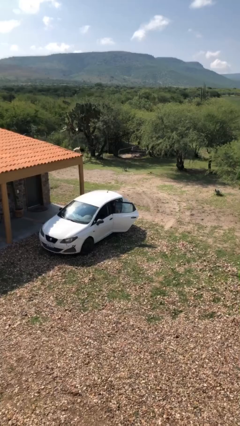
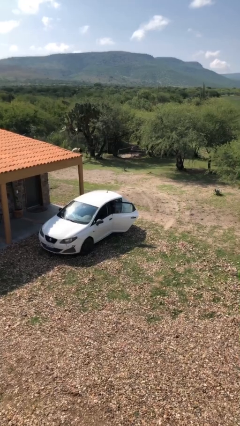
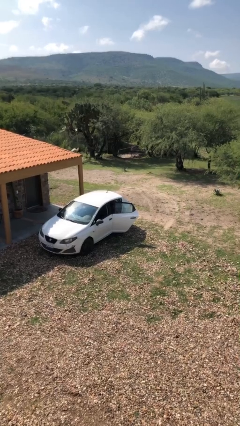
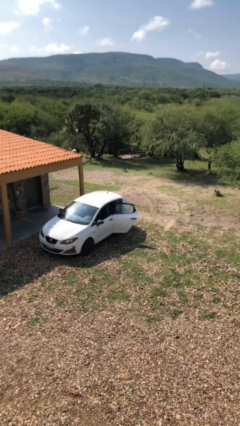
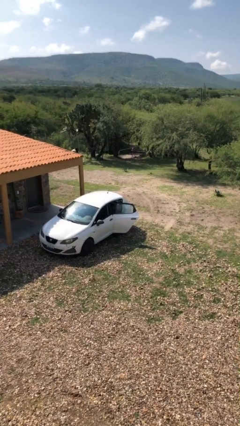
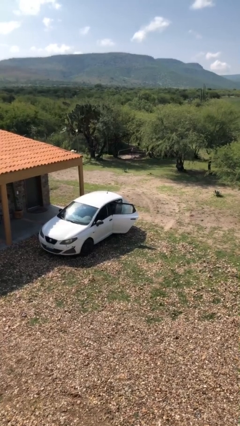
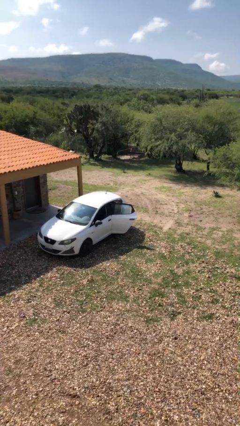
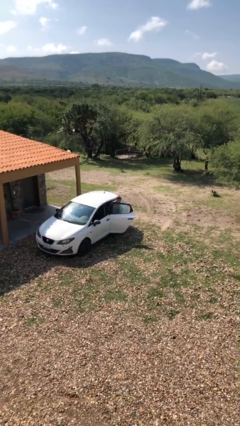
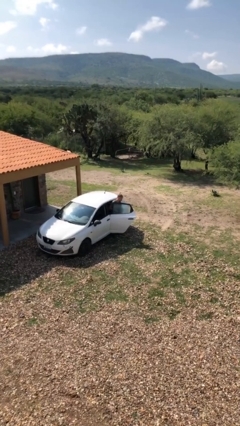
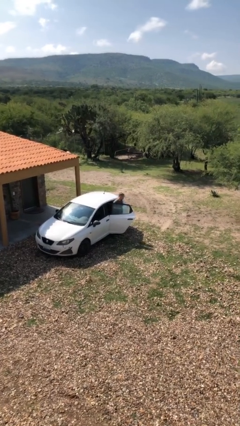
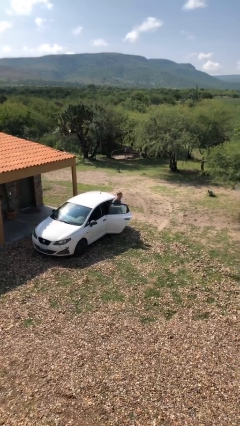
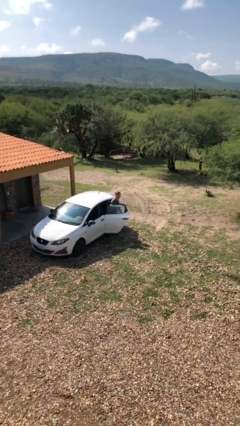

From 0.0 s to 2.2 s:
person exits car

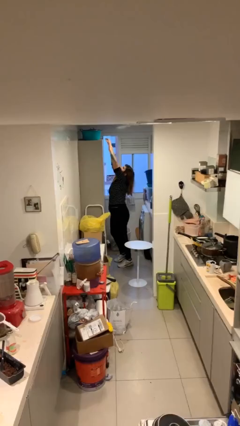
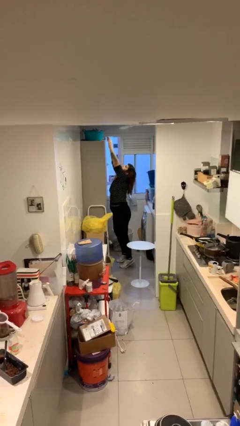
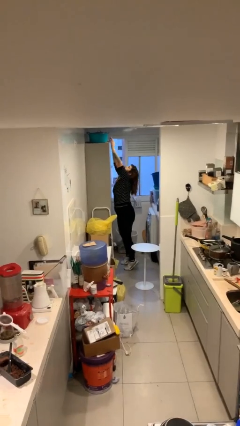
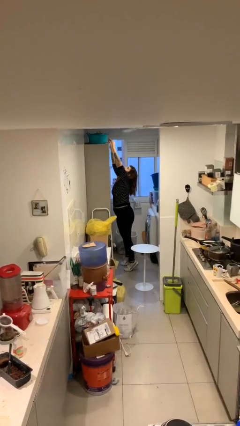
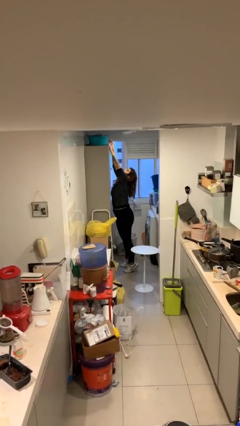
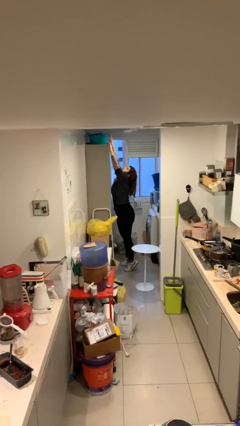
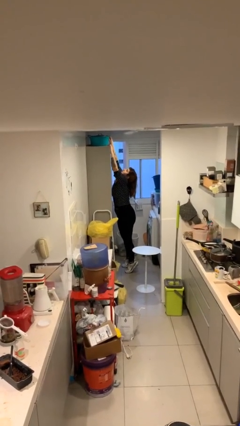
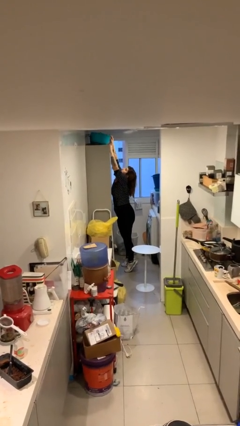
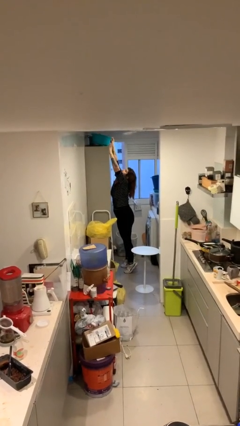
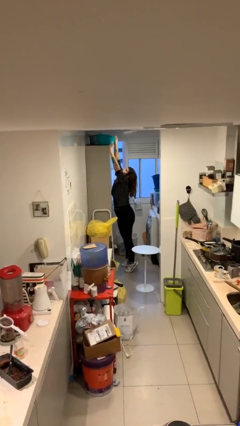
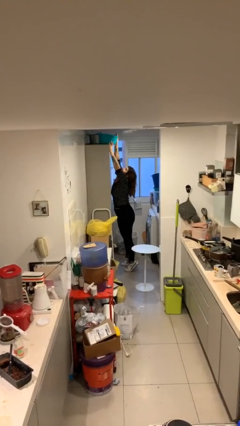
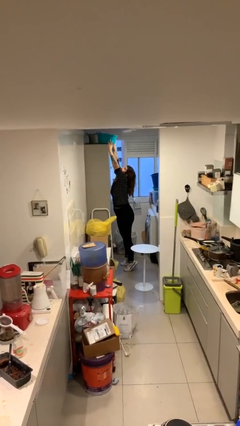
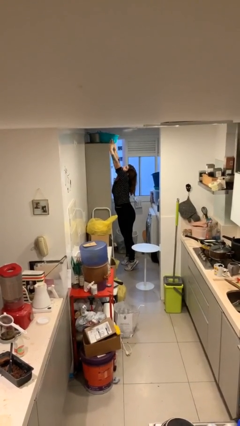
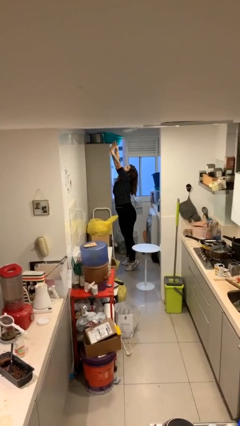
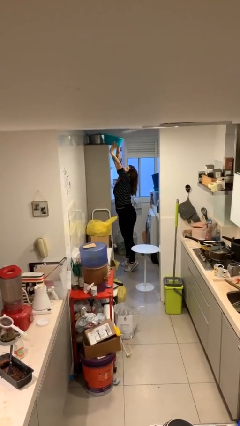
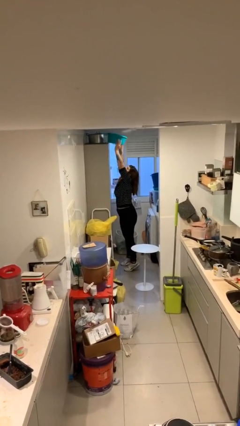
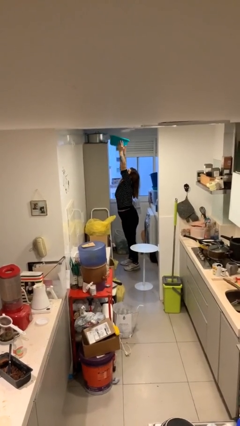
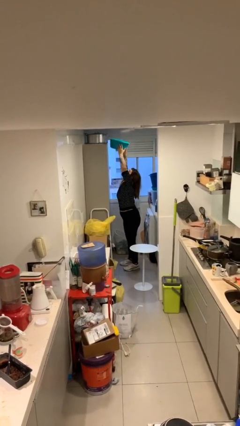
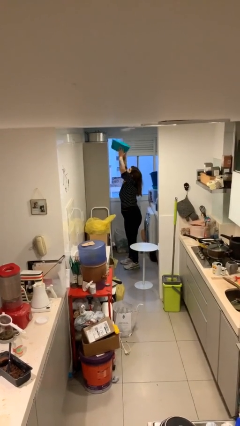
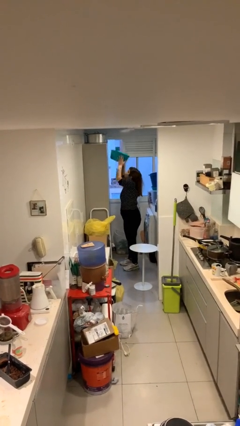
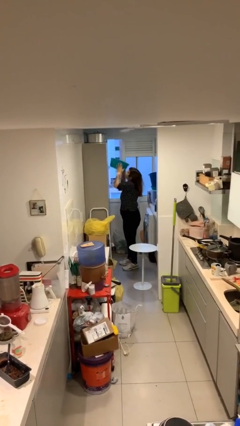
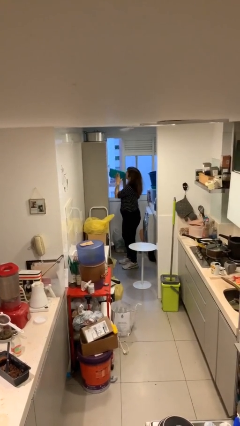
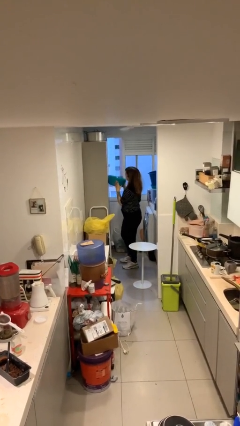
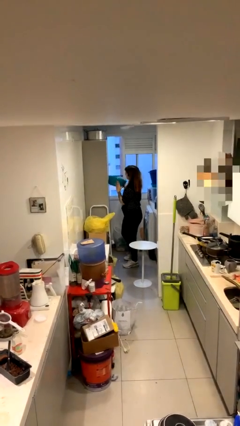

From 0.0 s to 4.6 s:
person picks up object from shelf

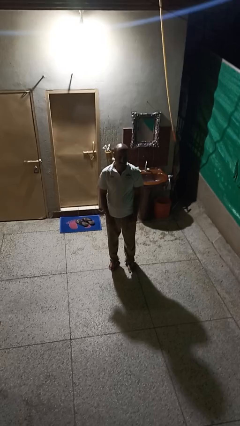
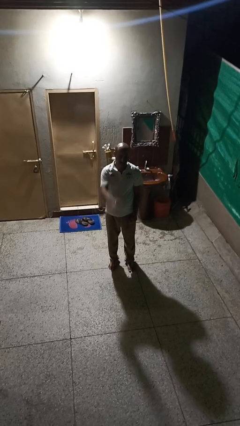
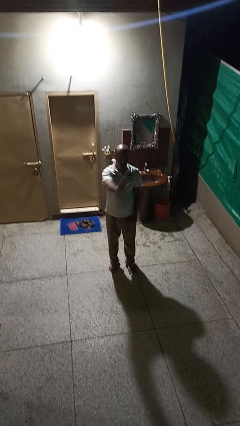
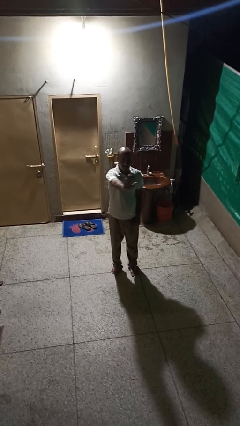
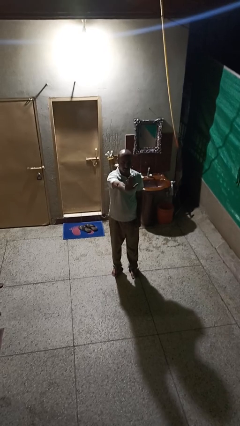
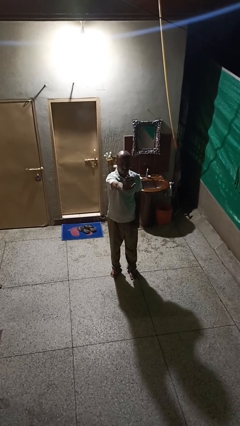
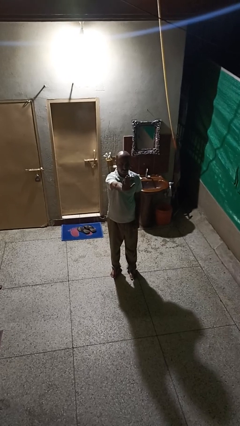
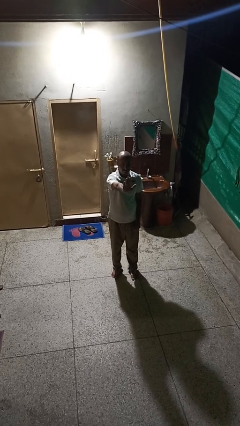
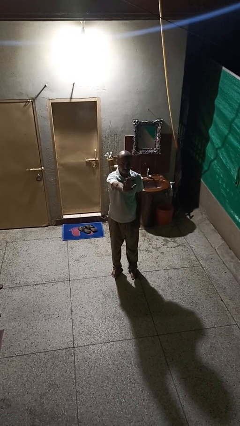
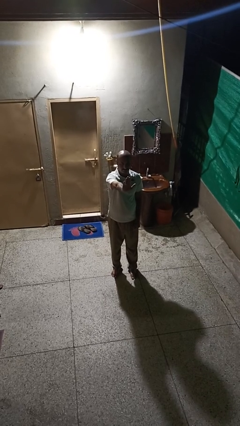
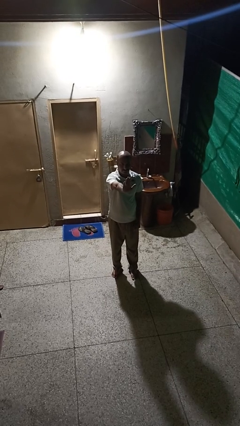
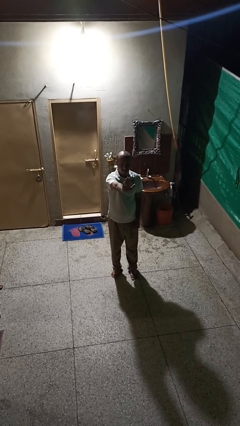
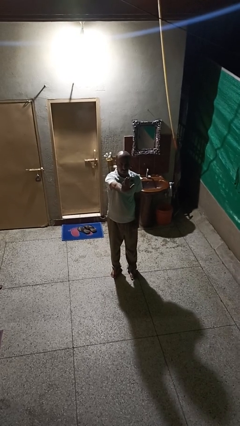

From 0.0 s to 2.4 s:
person gestures stop

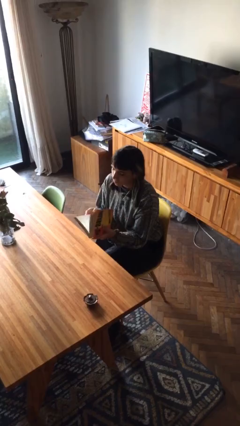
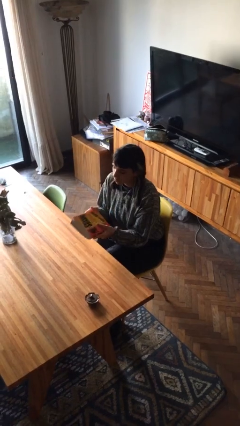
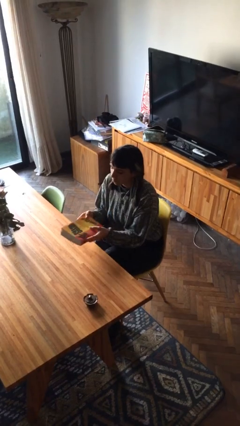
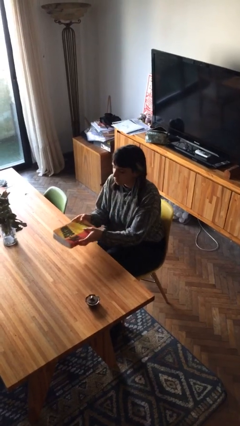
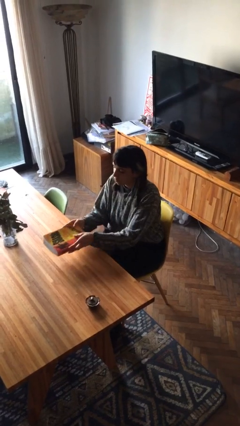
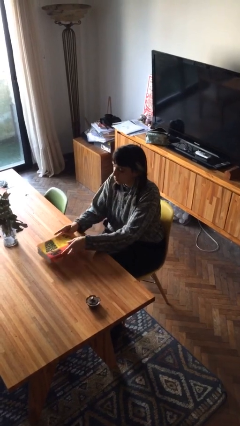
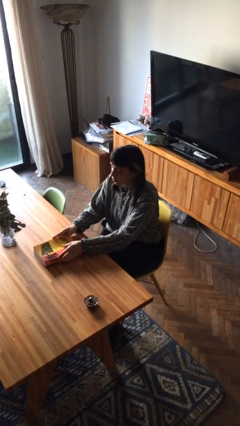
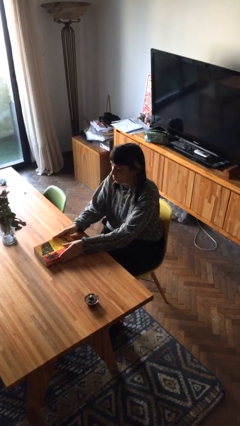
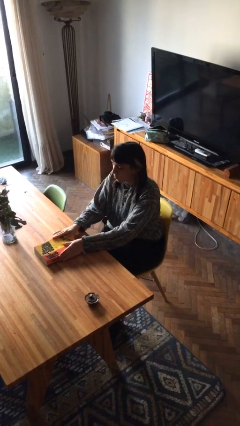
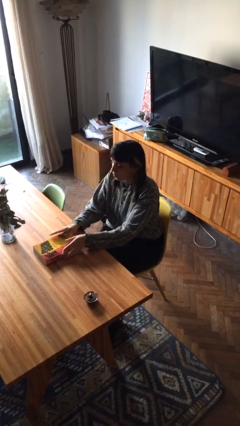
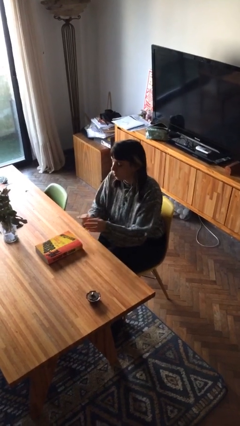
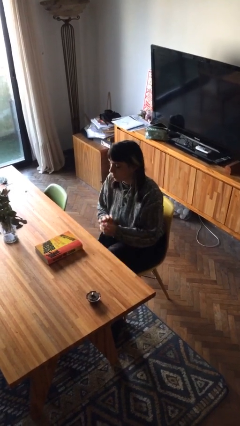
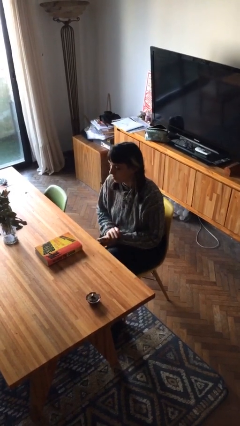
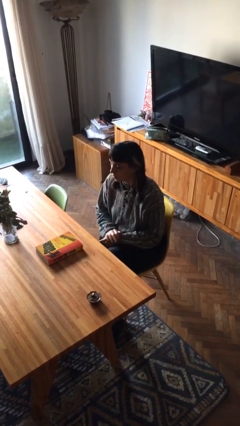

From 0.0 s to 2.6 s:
person puts down object on table

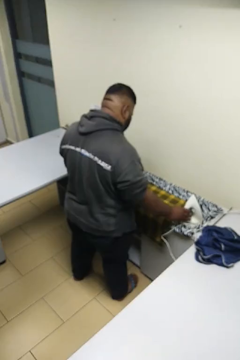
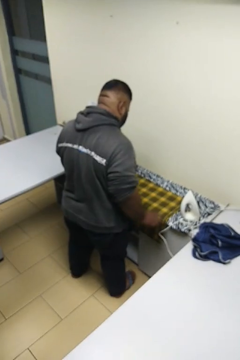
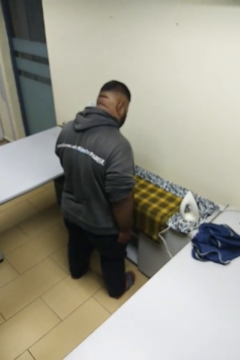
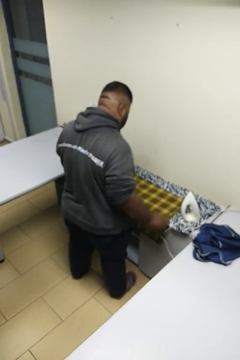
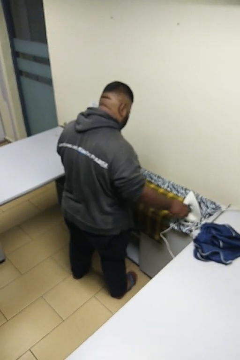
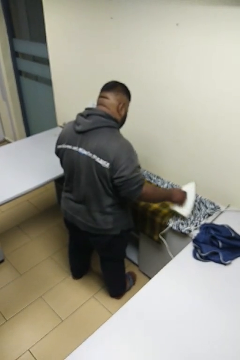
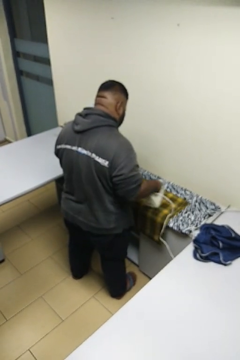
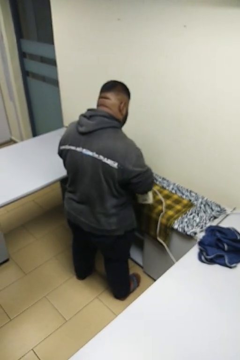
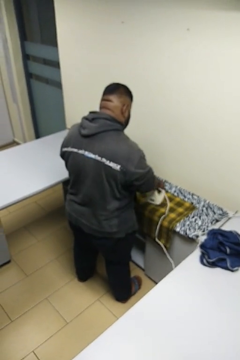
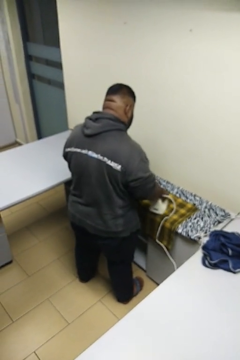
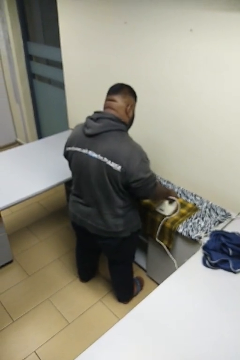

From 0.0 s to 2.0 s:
person irons clothes

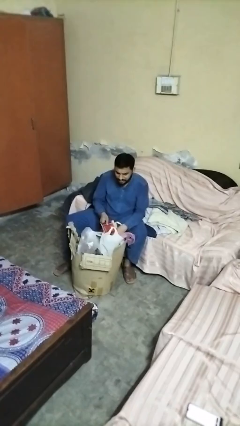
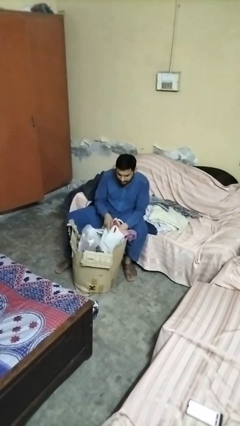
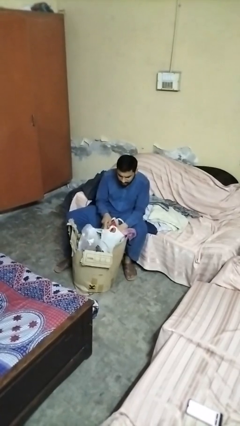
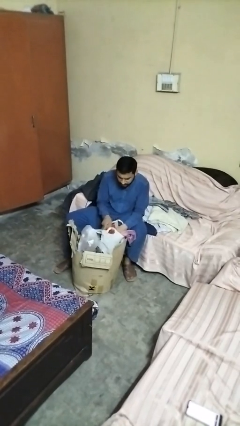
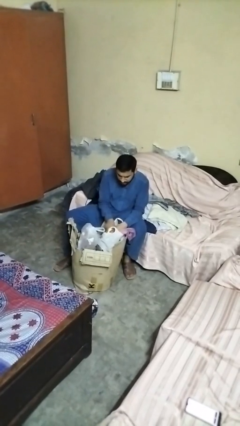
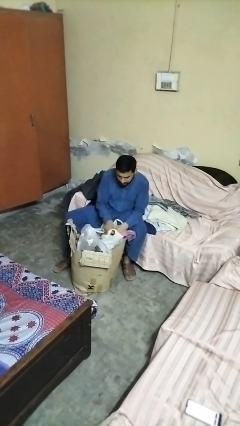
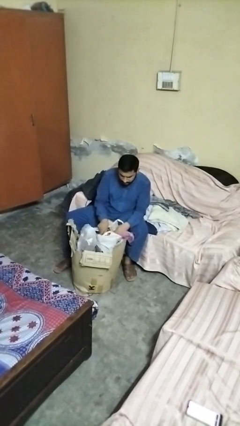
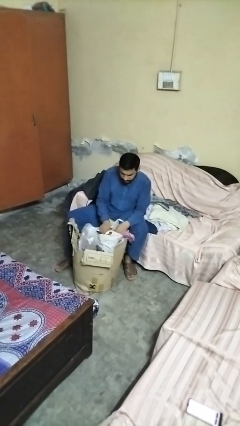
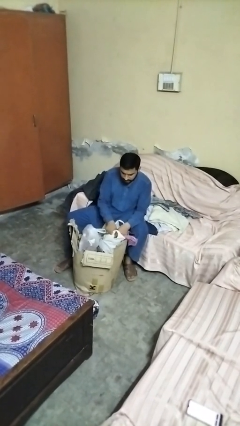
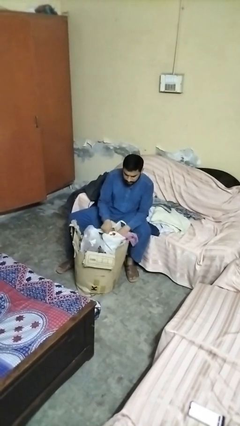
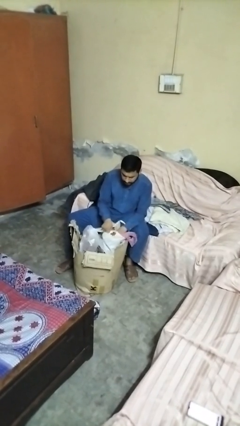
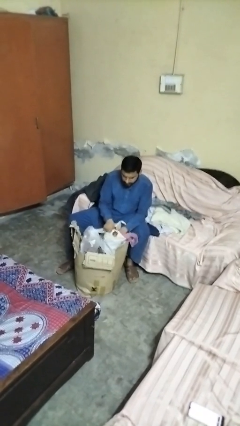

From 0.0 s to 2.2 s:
person puts object into box

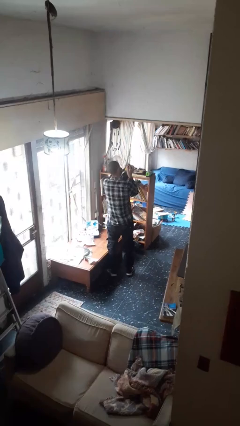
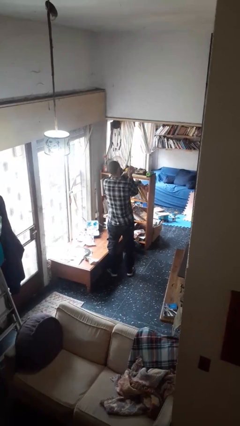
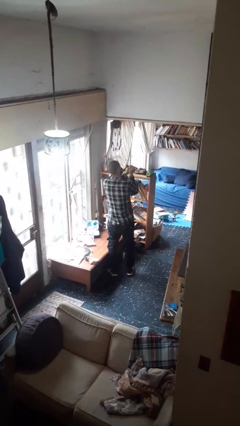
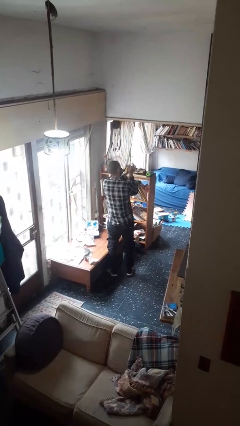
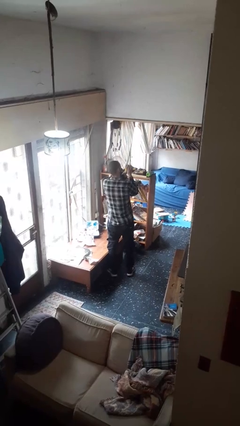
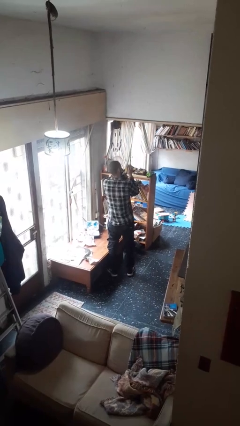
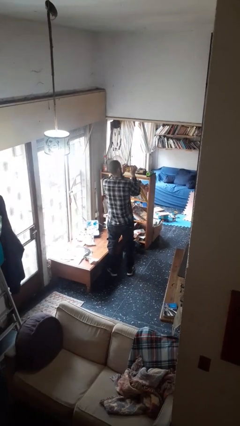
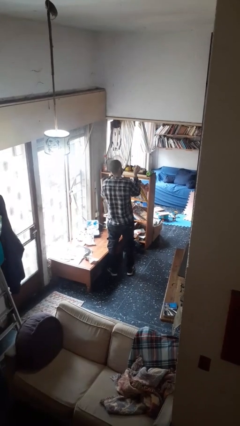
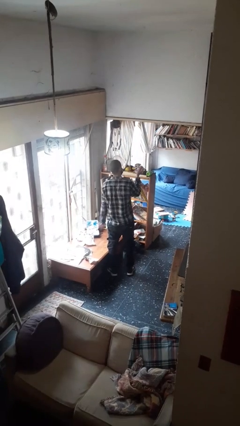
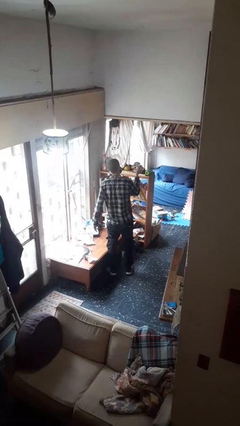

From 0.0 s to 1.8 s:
person crumples paper
